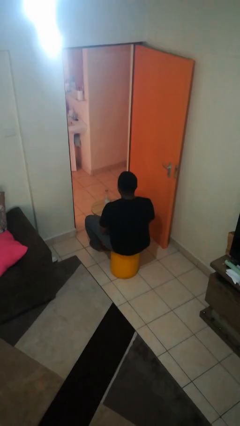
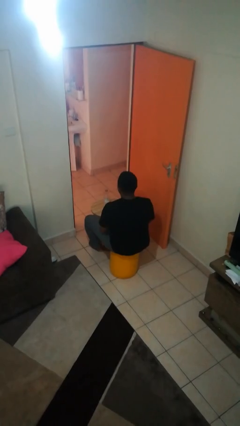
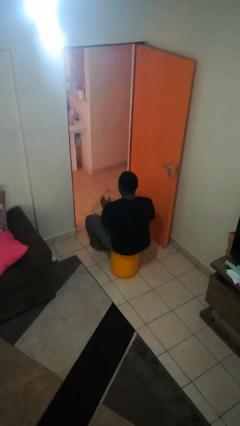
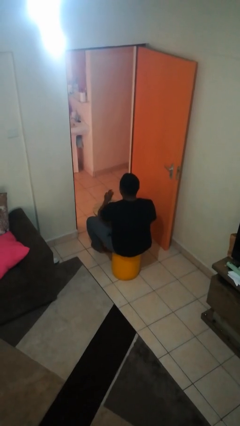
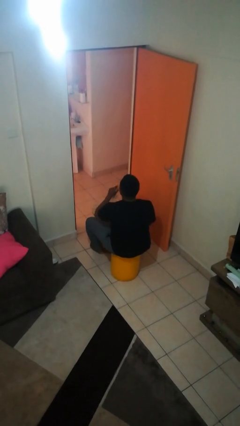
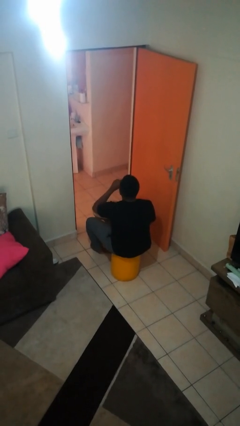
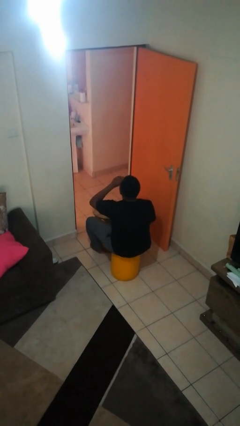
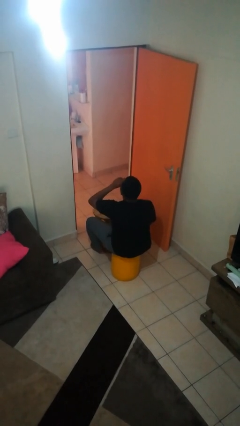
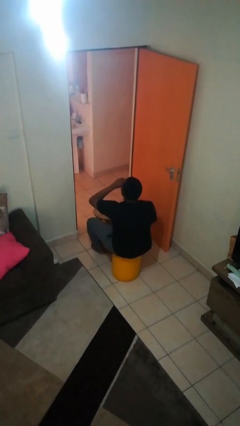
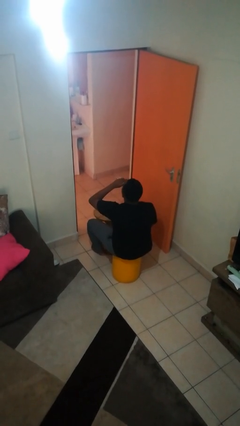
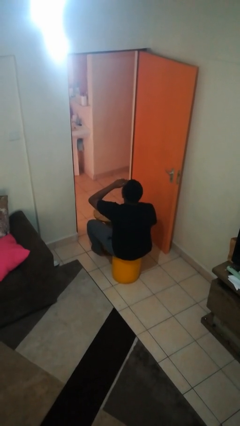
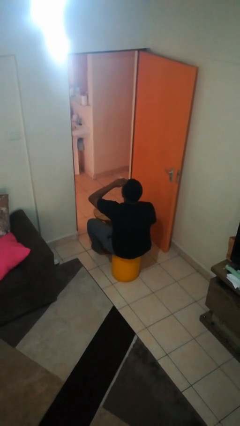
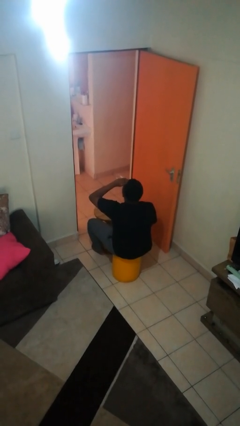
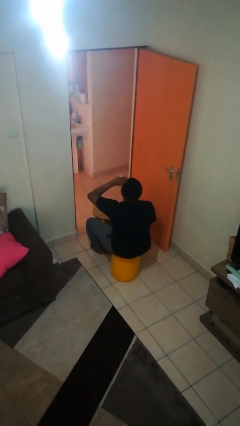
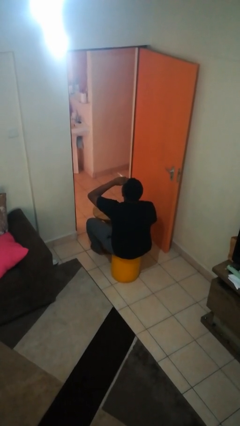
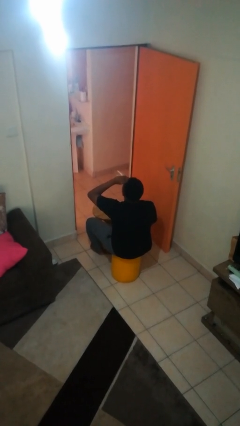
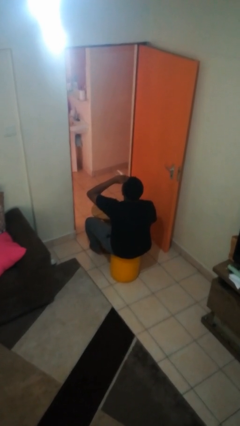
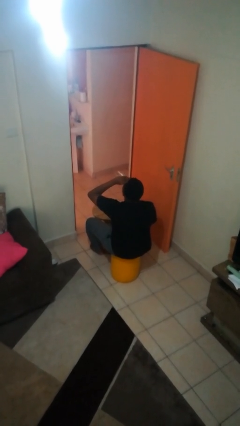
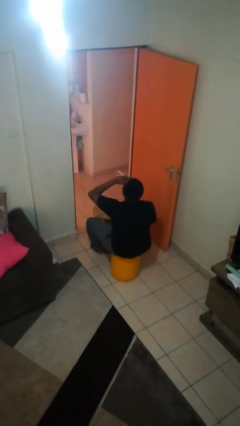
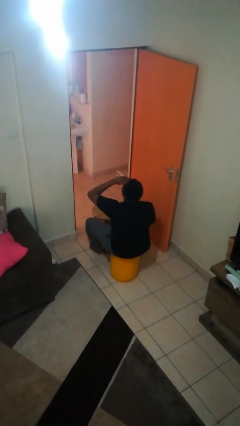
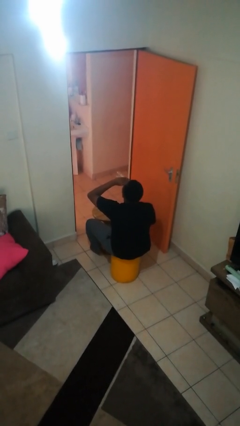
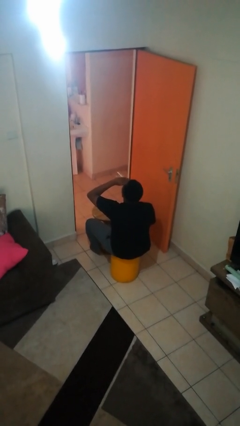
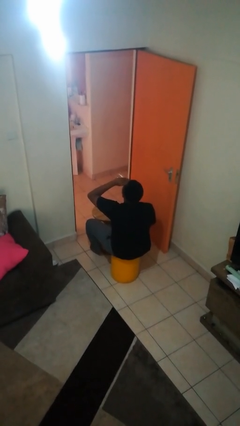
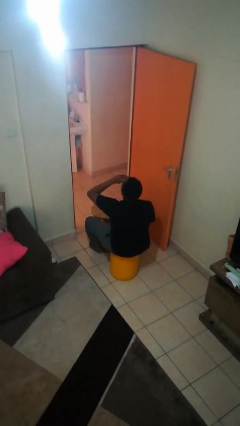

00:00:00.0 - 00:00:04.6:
person drinks from bottle

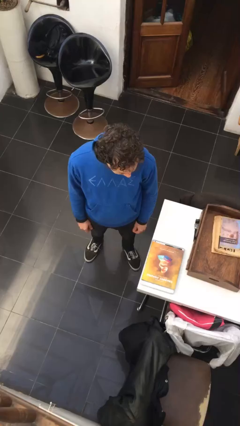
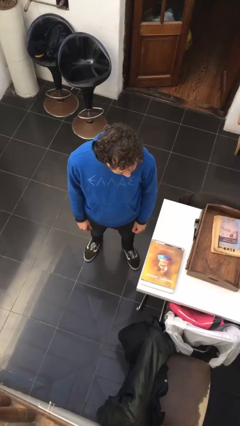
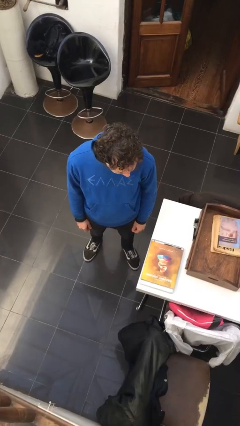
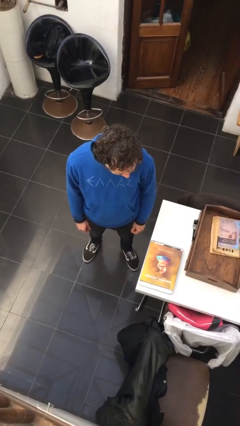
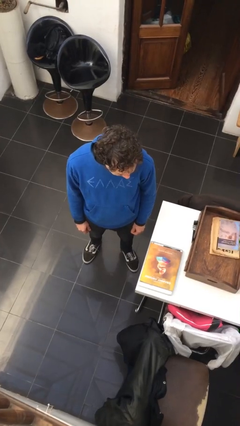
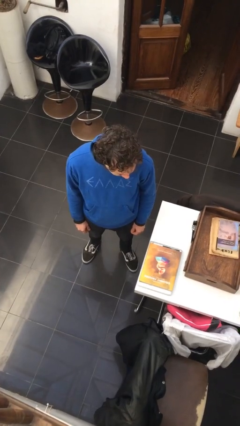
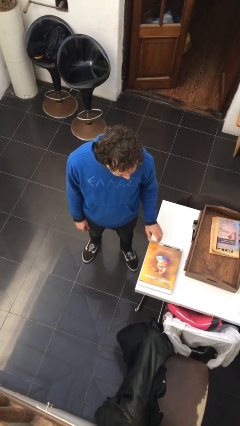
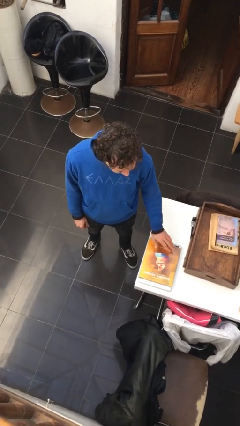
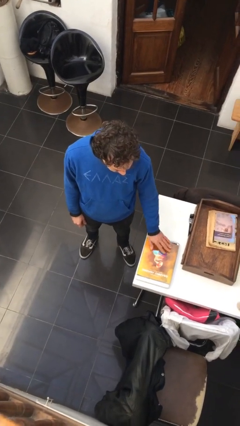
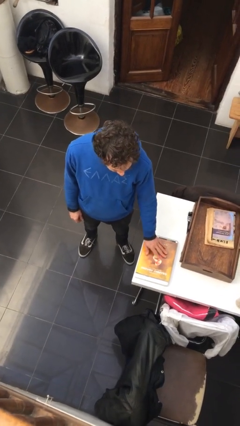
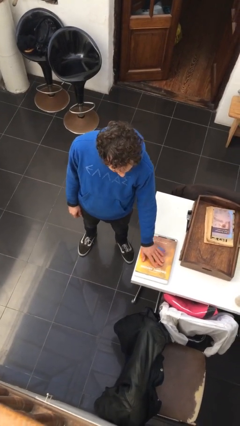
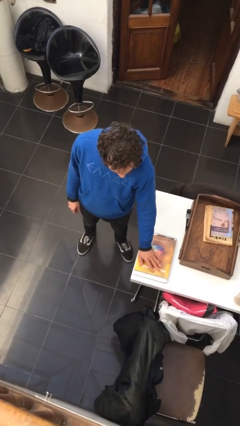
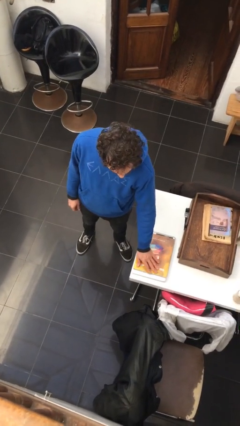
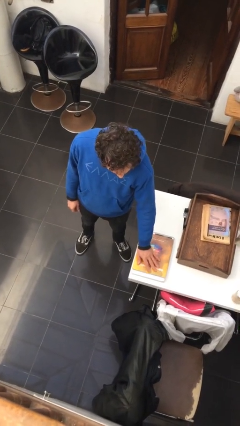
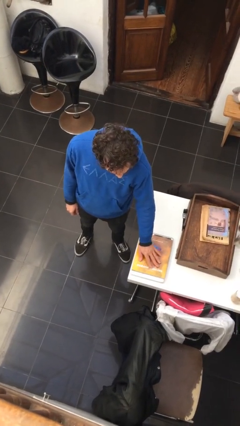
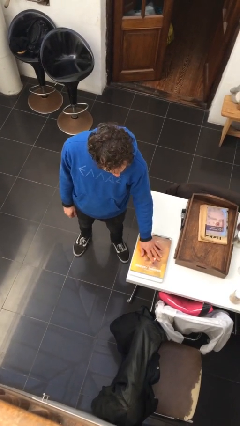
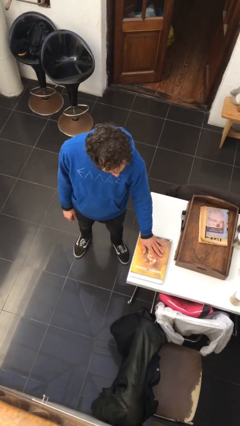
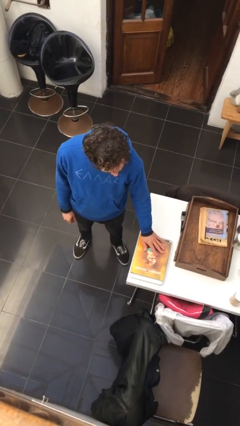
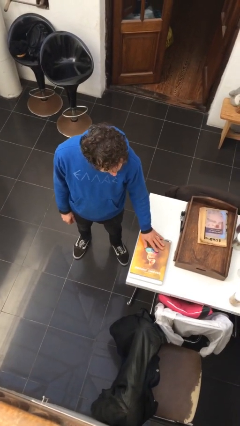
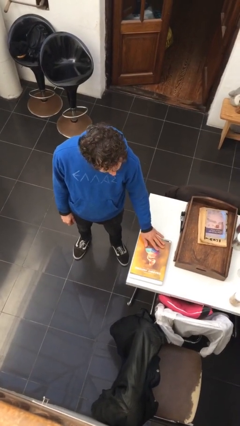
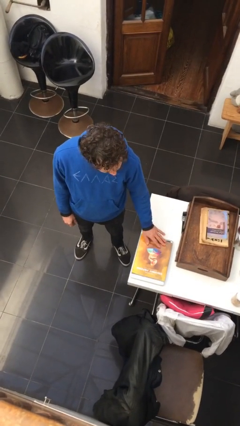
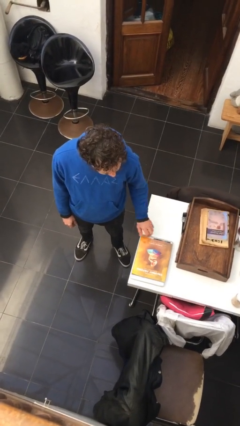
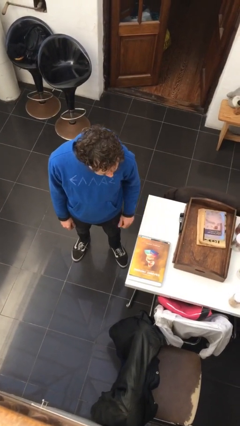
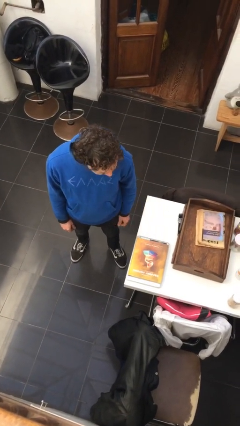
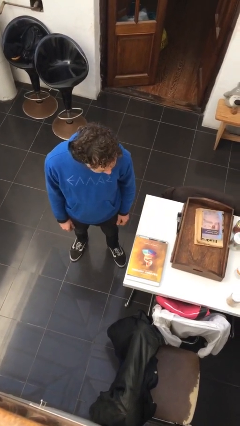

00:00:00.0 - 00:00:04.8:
person waves hand over object

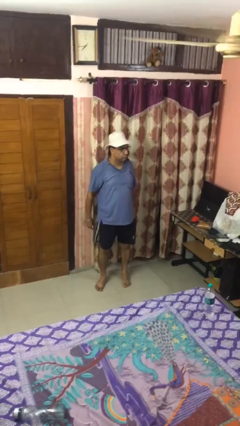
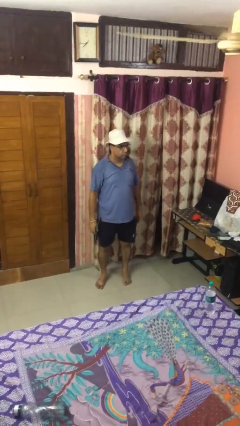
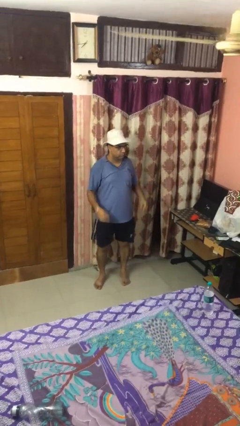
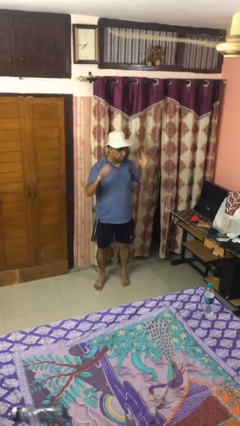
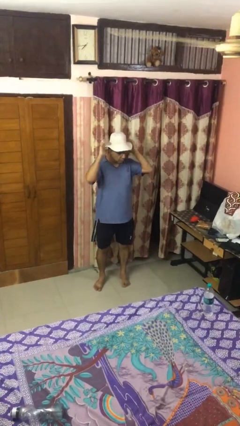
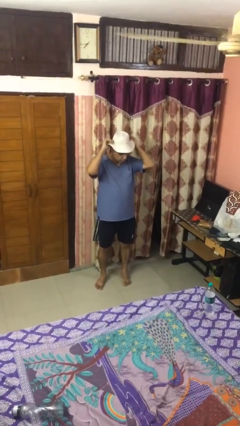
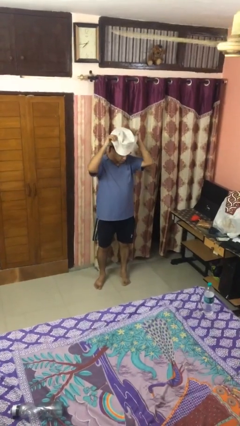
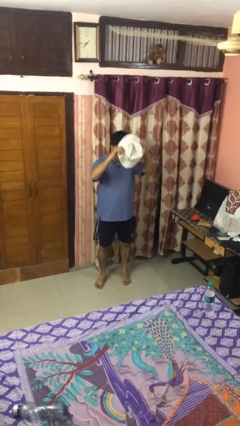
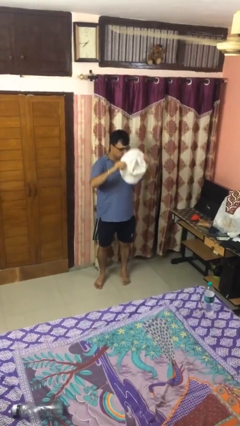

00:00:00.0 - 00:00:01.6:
person takes off hat

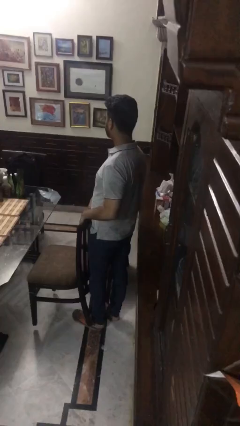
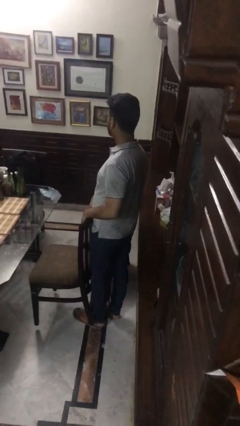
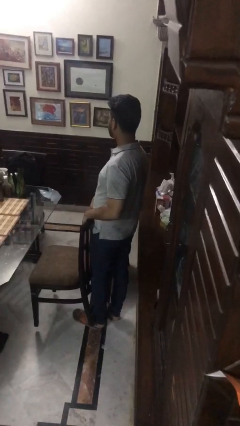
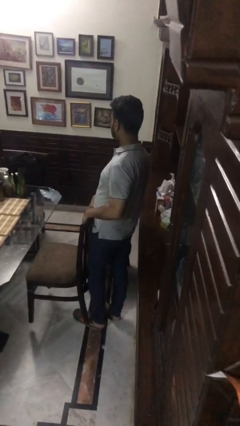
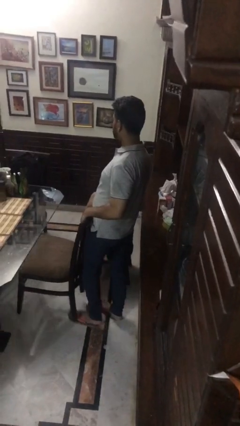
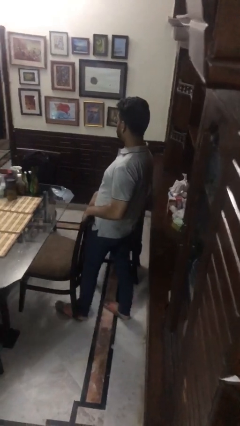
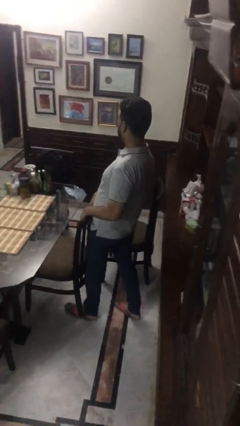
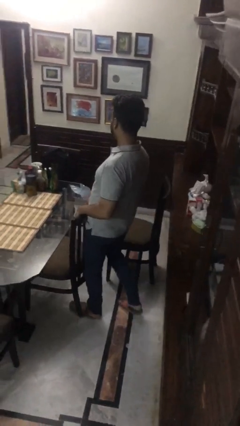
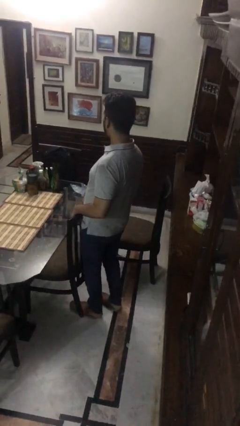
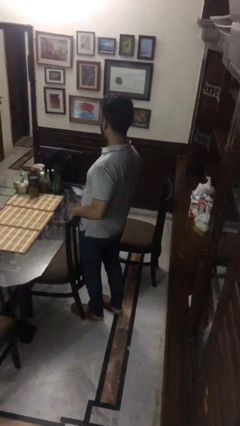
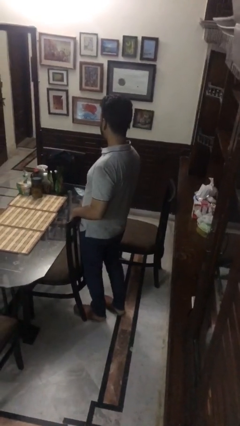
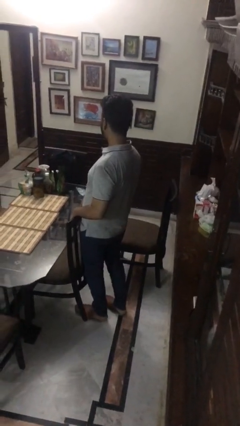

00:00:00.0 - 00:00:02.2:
person pushes in chair

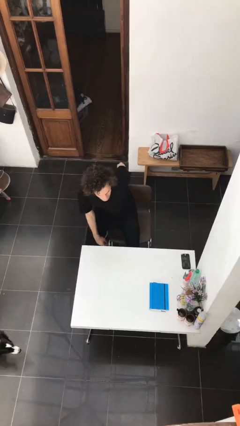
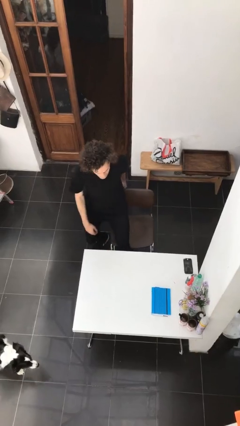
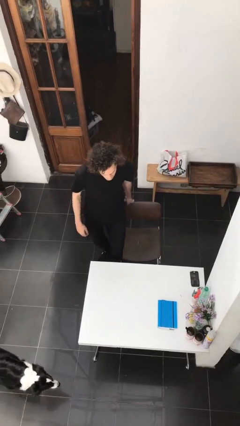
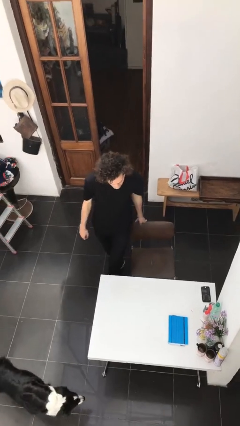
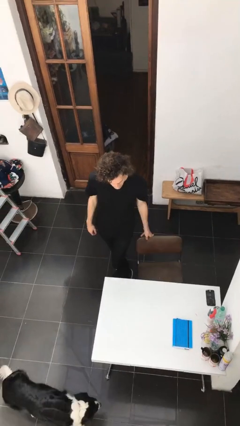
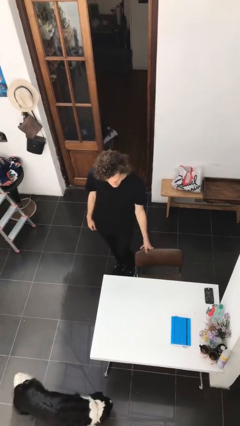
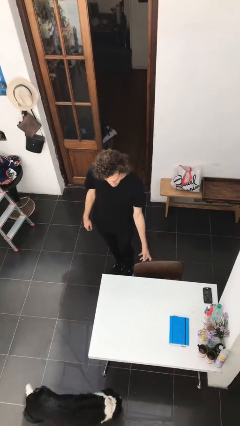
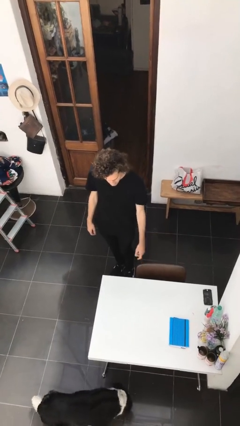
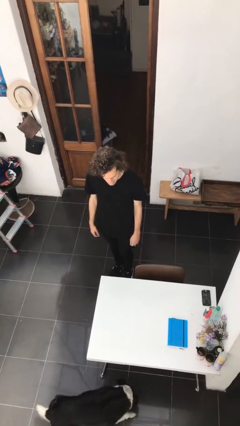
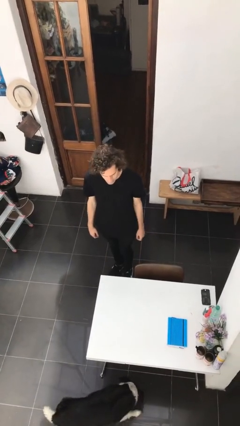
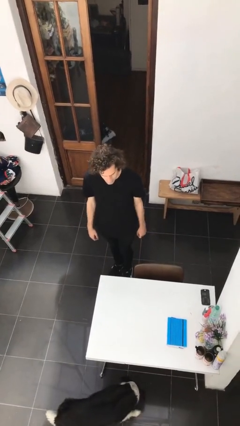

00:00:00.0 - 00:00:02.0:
person stands up

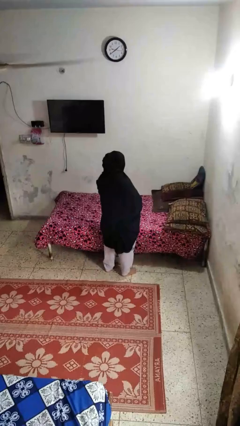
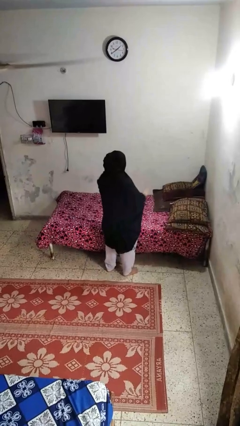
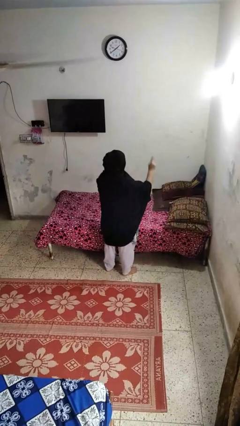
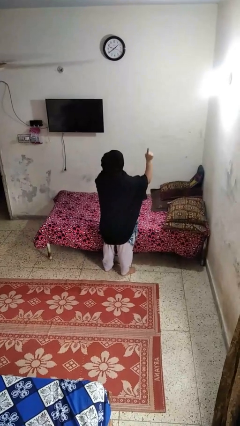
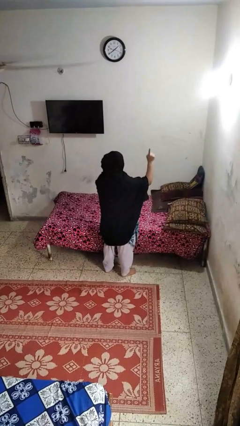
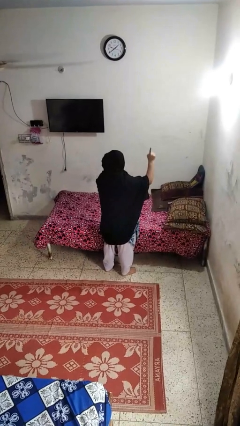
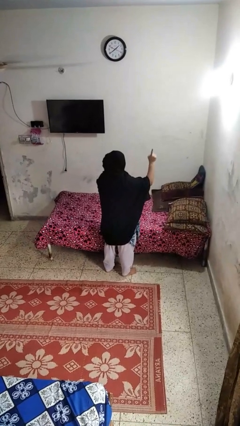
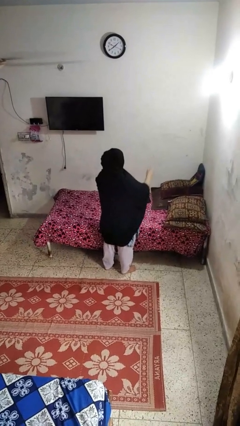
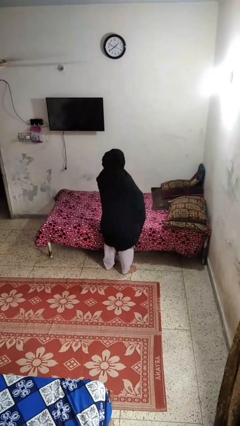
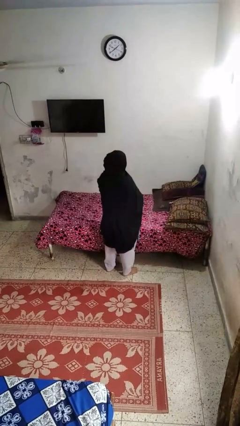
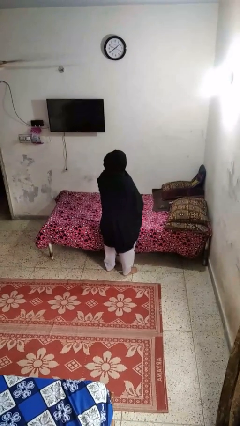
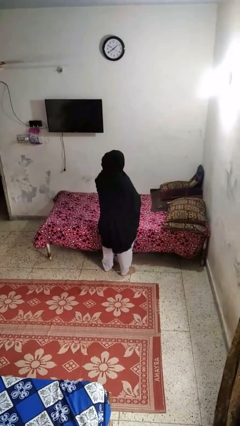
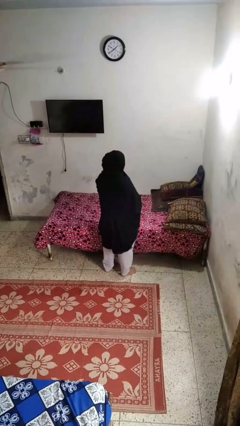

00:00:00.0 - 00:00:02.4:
person gestures number one
